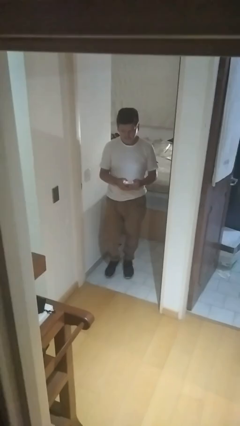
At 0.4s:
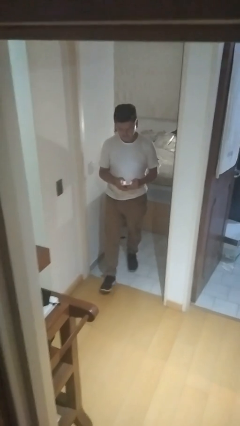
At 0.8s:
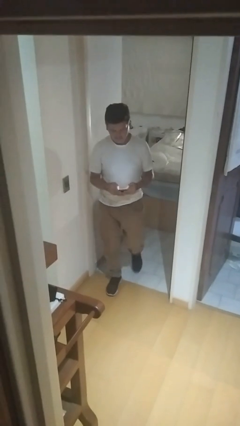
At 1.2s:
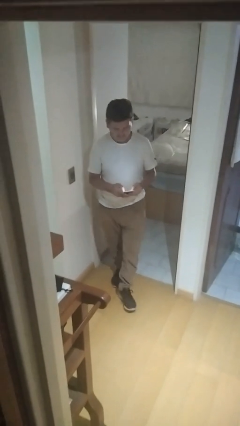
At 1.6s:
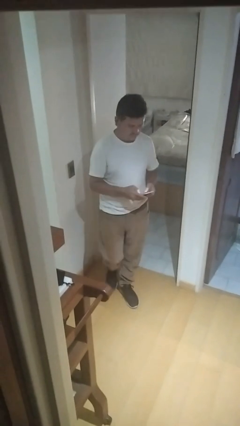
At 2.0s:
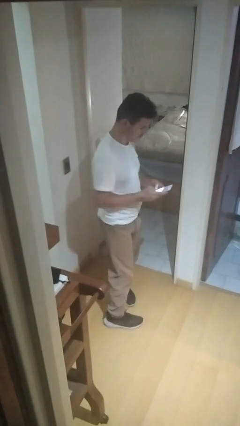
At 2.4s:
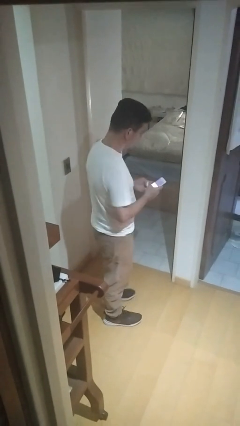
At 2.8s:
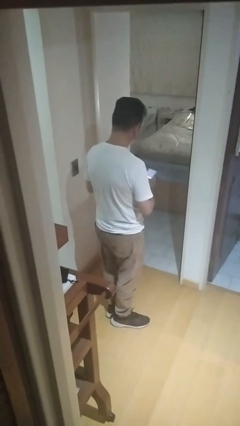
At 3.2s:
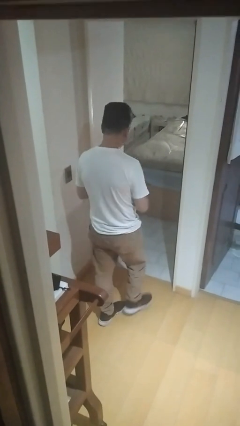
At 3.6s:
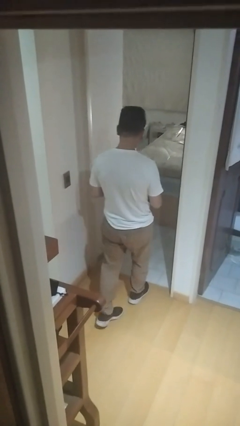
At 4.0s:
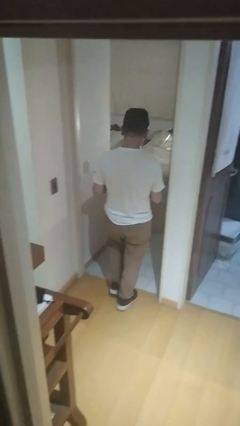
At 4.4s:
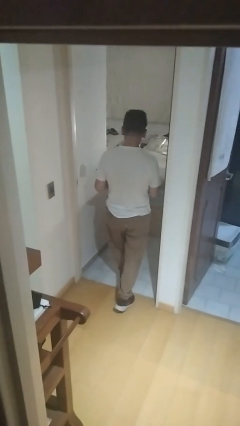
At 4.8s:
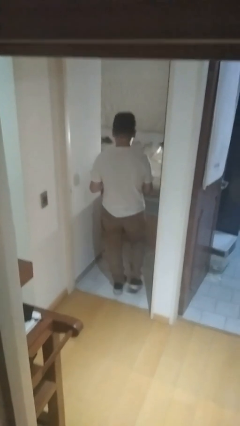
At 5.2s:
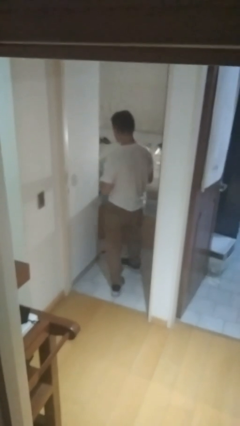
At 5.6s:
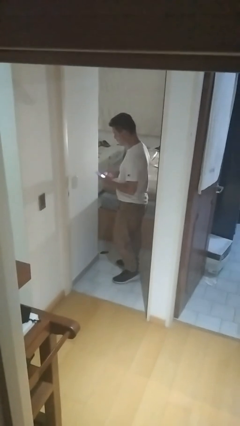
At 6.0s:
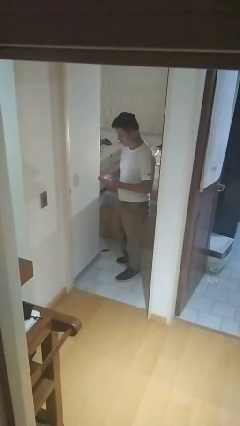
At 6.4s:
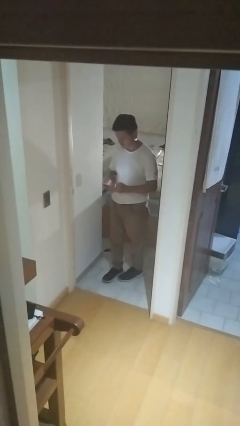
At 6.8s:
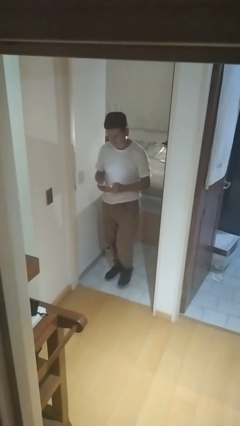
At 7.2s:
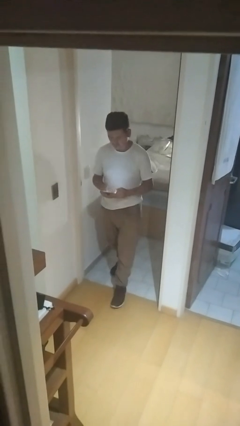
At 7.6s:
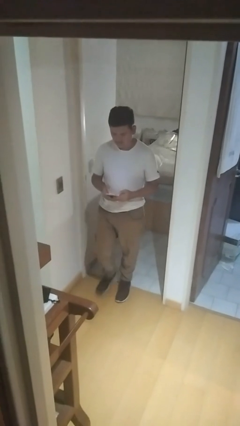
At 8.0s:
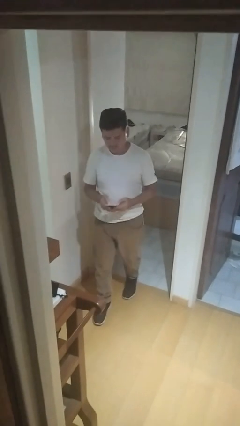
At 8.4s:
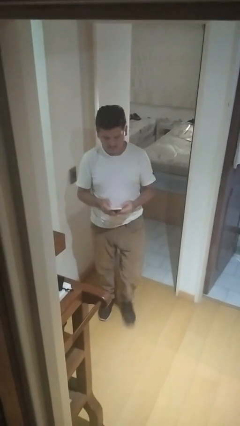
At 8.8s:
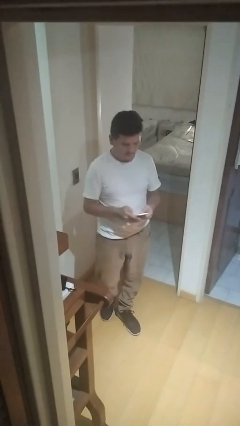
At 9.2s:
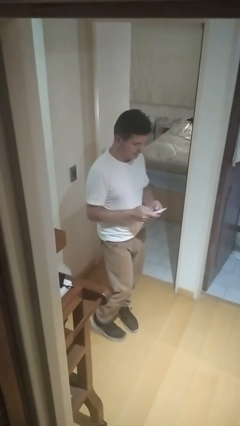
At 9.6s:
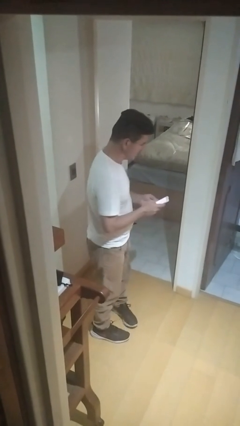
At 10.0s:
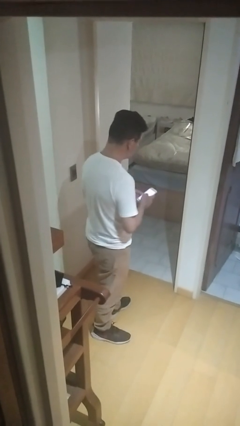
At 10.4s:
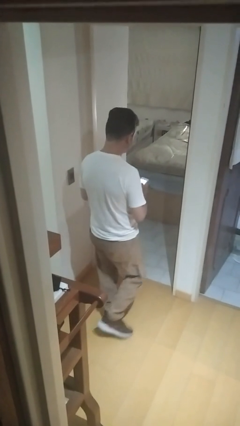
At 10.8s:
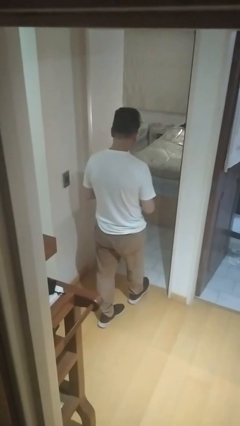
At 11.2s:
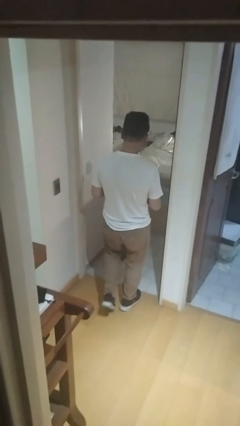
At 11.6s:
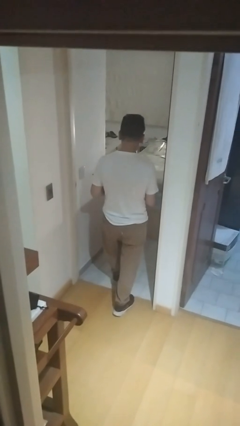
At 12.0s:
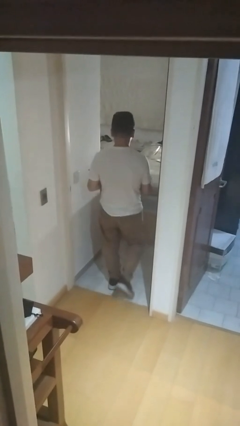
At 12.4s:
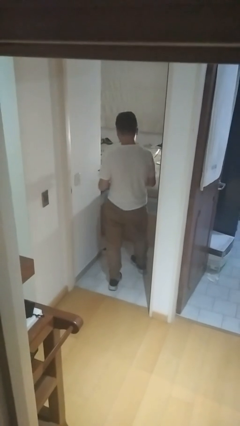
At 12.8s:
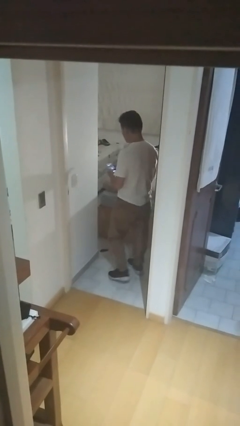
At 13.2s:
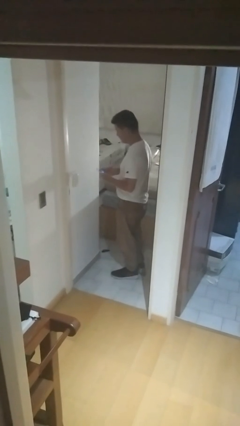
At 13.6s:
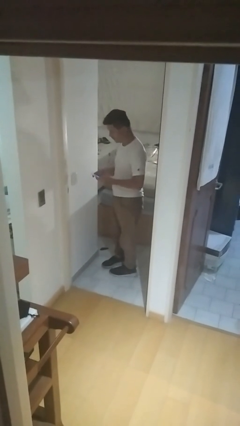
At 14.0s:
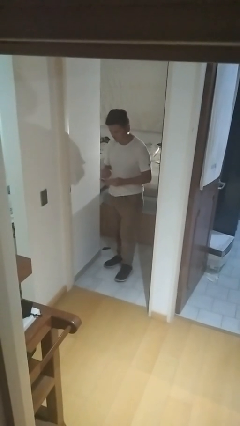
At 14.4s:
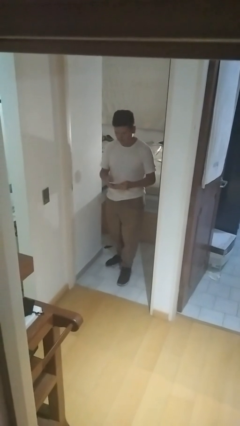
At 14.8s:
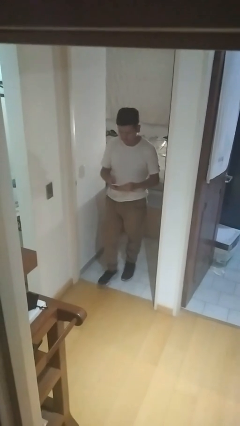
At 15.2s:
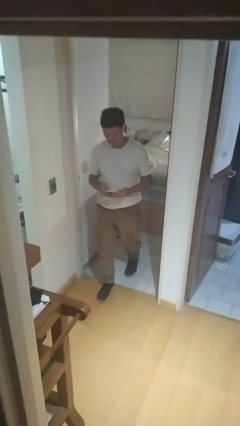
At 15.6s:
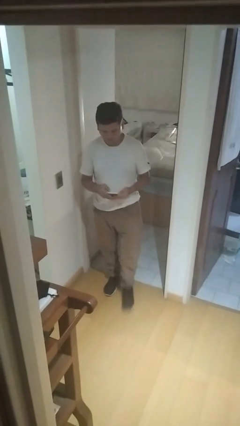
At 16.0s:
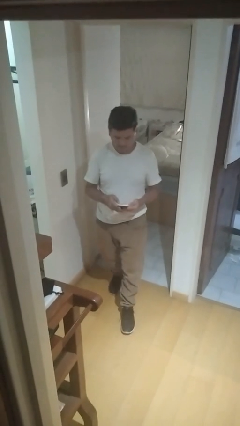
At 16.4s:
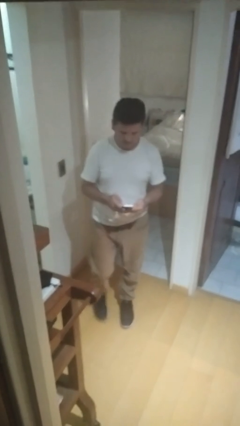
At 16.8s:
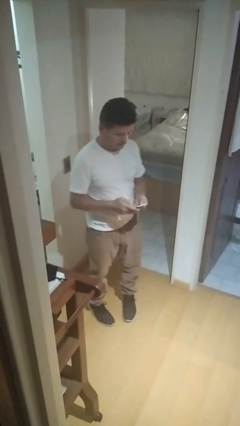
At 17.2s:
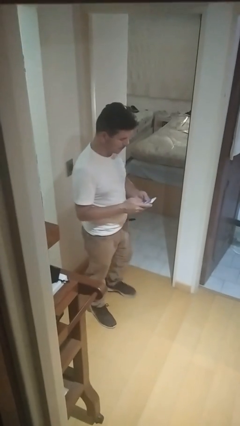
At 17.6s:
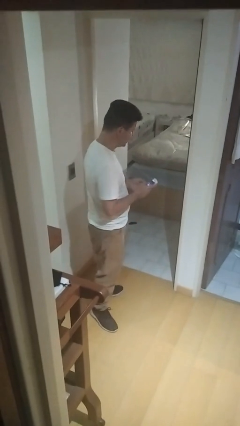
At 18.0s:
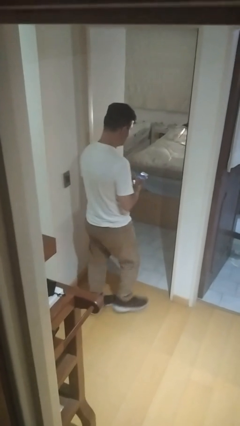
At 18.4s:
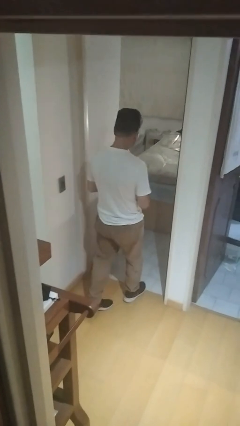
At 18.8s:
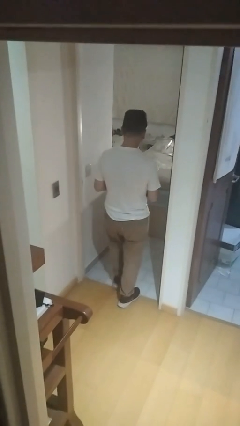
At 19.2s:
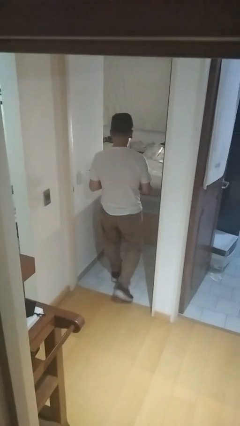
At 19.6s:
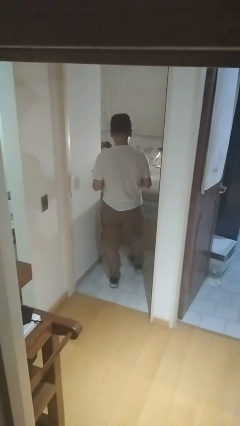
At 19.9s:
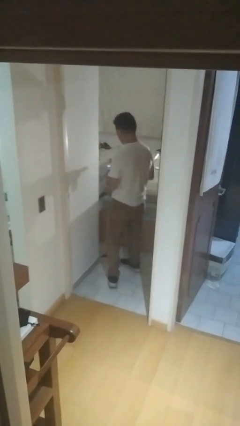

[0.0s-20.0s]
person texts on phone

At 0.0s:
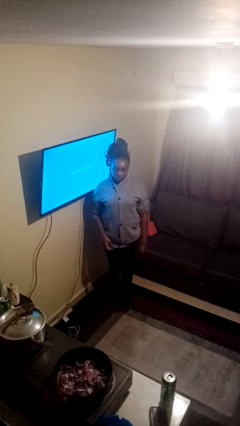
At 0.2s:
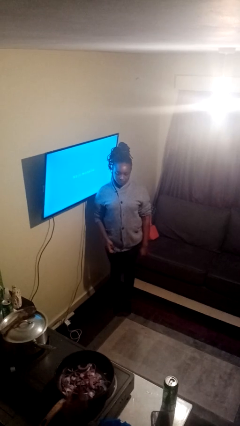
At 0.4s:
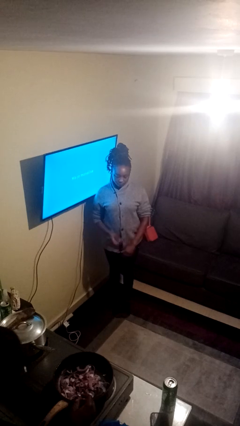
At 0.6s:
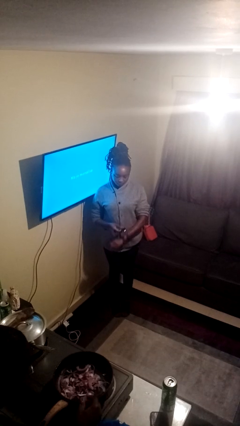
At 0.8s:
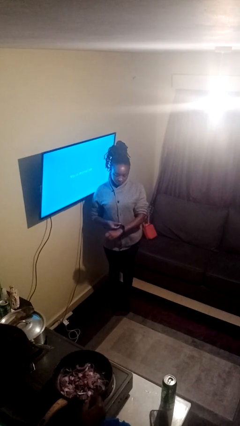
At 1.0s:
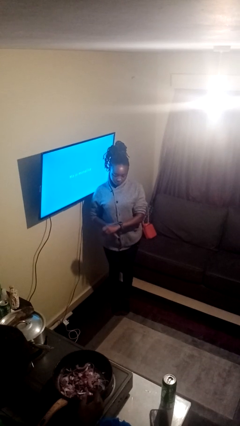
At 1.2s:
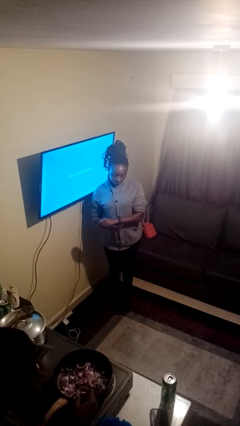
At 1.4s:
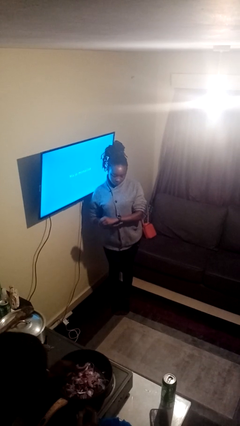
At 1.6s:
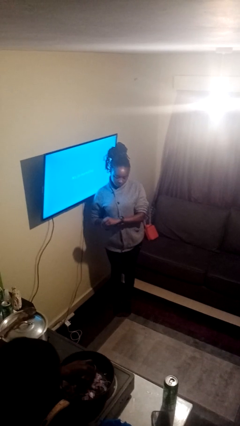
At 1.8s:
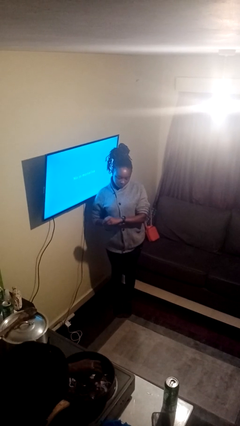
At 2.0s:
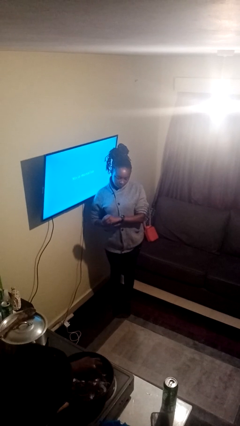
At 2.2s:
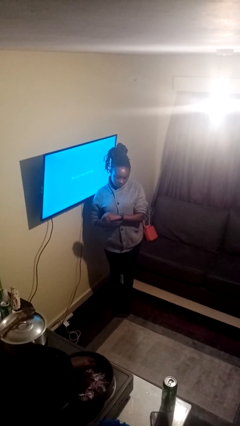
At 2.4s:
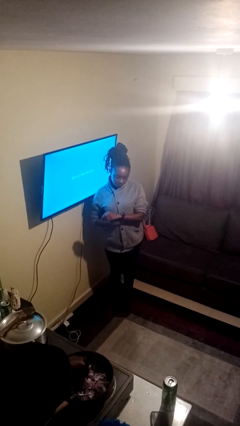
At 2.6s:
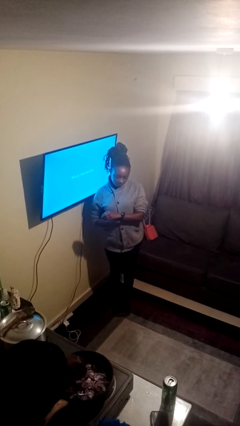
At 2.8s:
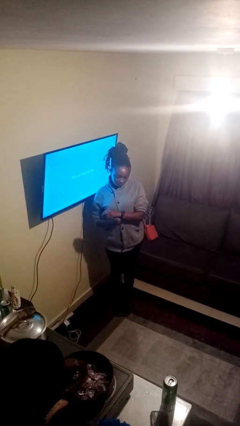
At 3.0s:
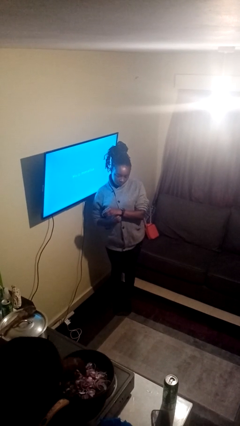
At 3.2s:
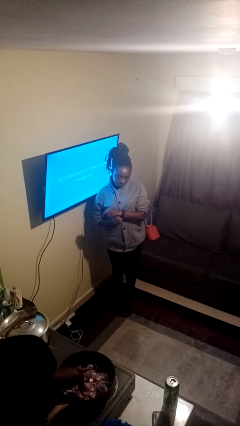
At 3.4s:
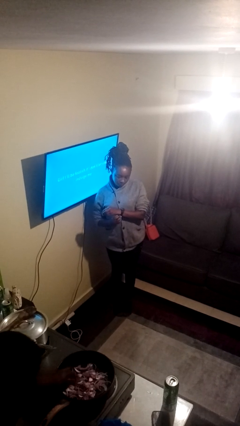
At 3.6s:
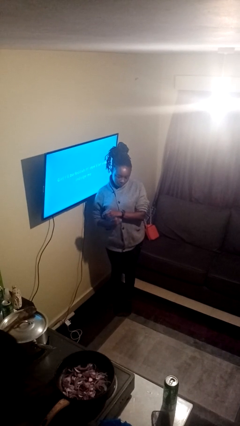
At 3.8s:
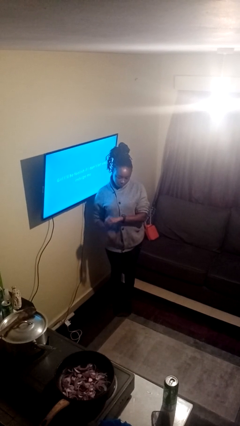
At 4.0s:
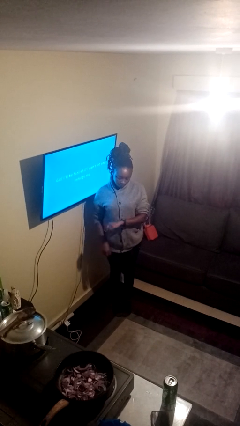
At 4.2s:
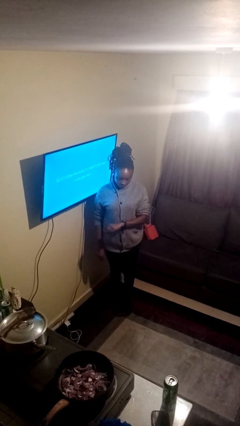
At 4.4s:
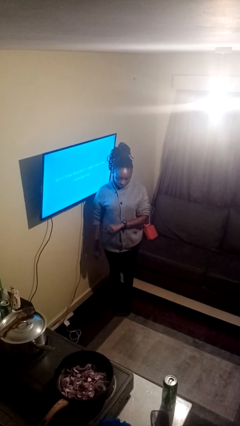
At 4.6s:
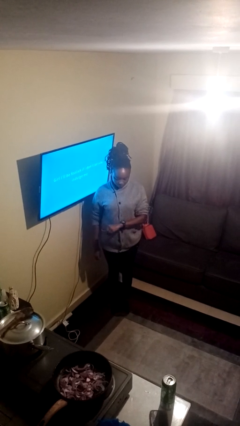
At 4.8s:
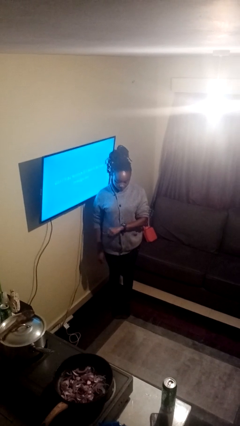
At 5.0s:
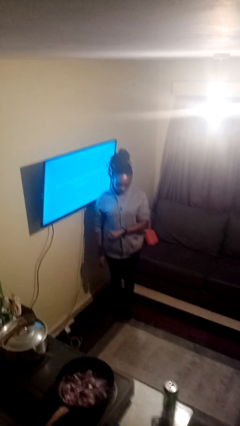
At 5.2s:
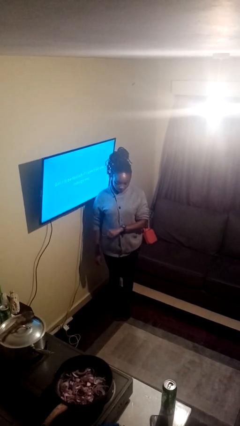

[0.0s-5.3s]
person puts on wristwatch

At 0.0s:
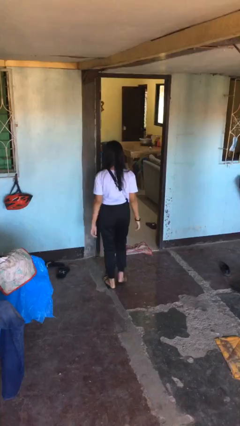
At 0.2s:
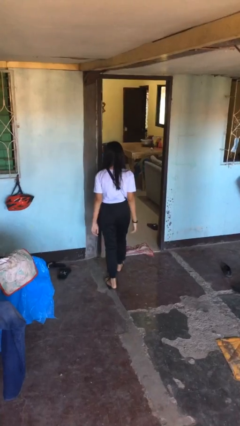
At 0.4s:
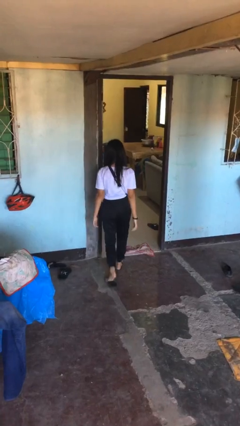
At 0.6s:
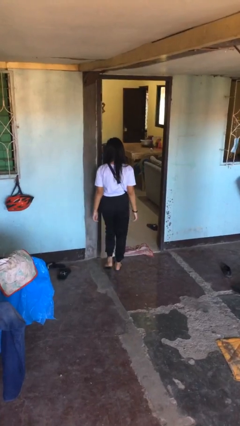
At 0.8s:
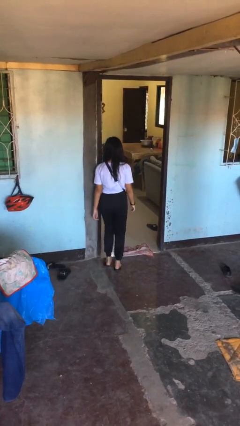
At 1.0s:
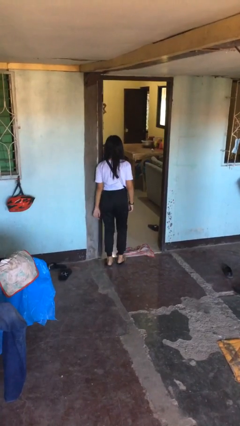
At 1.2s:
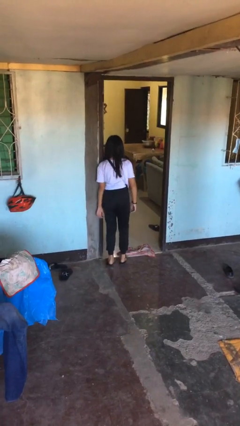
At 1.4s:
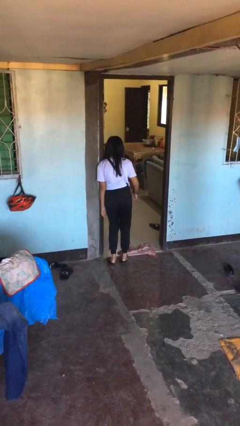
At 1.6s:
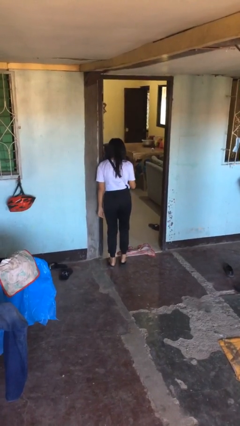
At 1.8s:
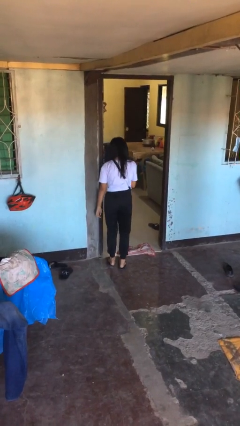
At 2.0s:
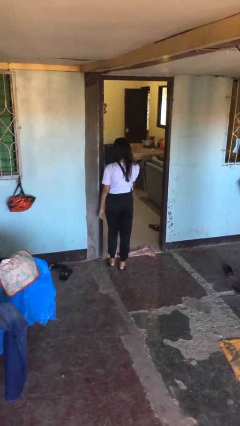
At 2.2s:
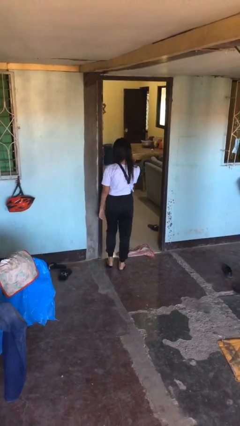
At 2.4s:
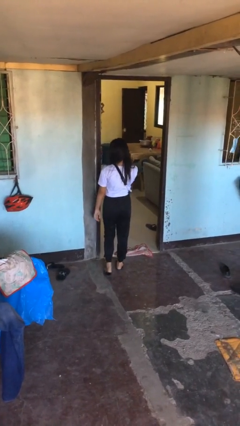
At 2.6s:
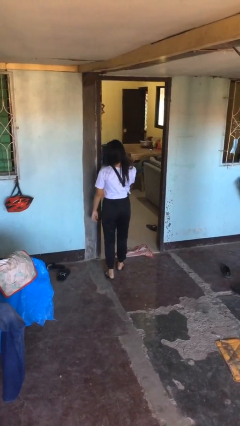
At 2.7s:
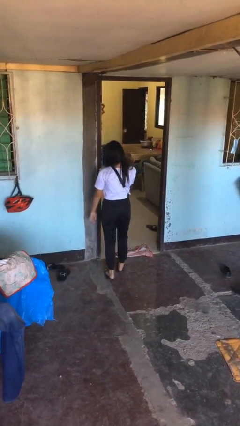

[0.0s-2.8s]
person bumps into wall
